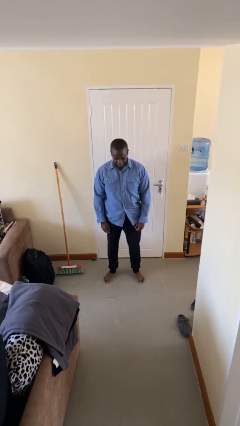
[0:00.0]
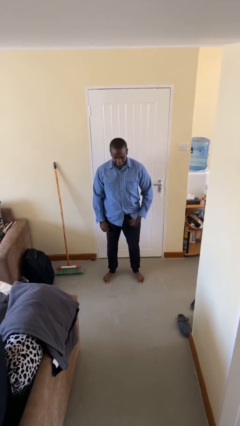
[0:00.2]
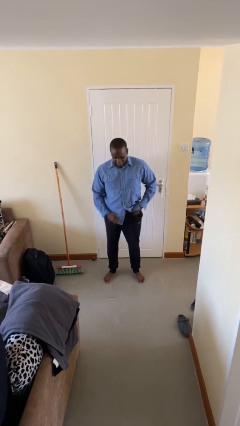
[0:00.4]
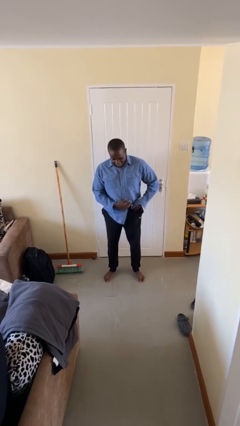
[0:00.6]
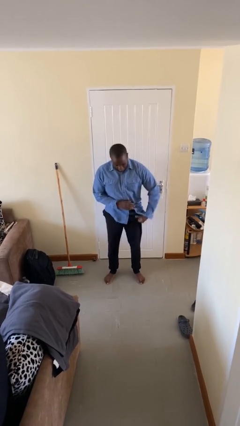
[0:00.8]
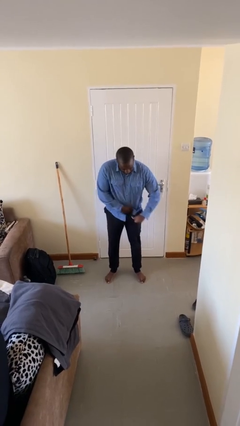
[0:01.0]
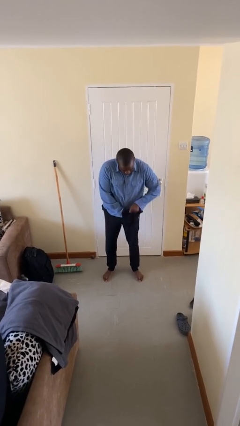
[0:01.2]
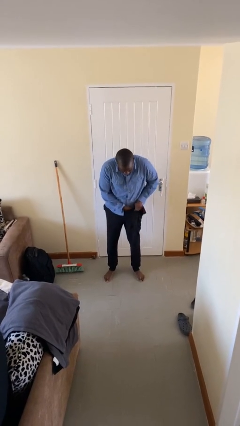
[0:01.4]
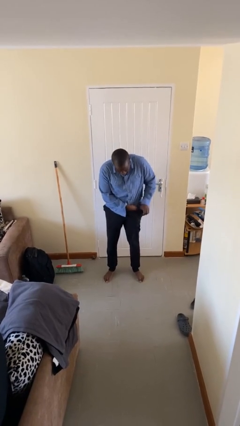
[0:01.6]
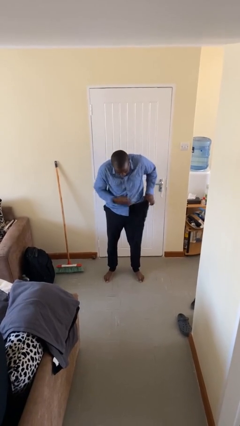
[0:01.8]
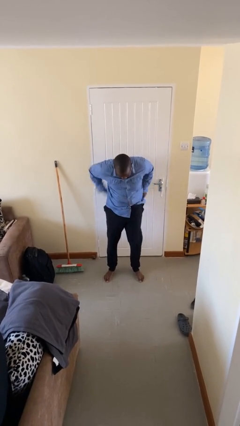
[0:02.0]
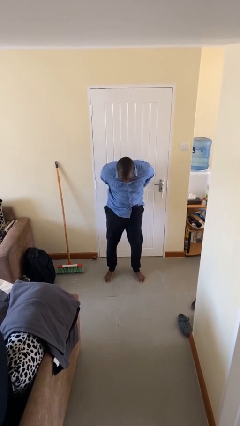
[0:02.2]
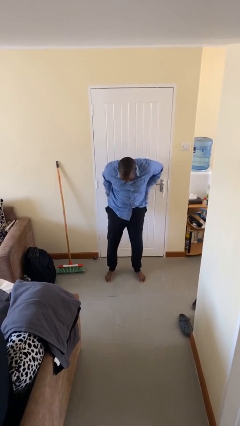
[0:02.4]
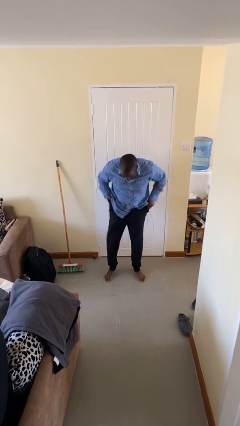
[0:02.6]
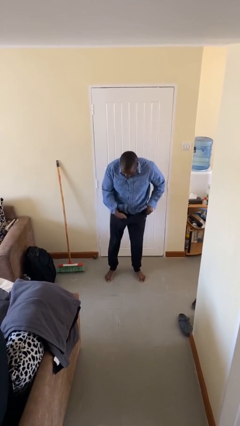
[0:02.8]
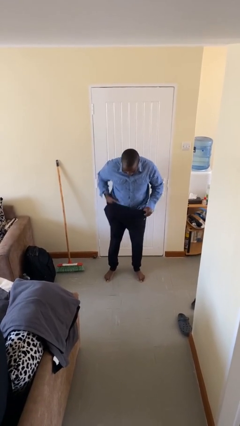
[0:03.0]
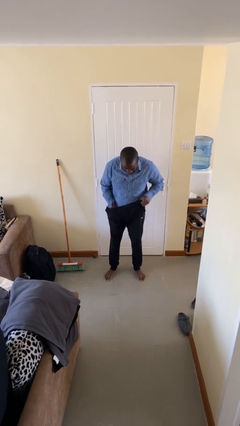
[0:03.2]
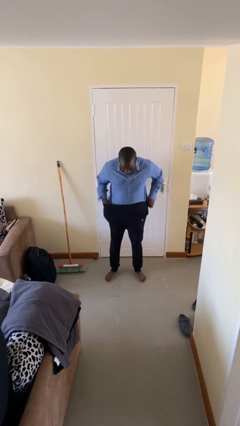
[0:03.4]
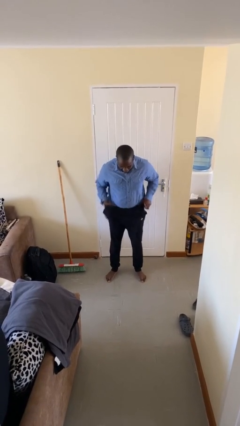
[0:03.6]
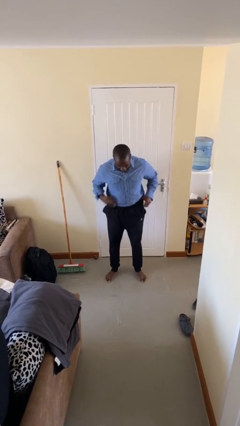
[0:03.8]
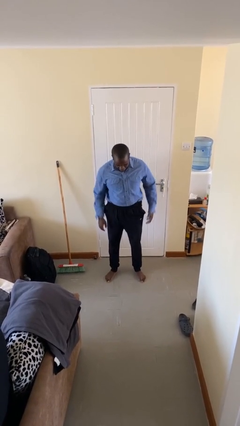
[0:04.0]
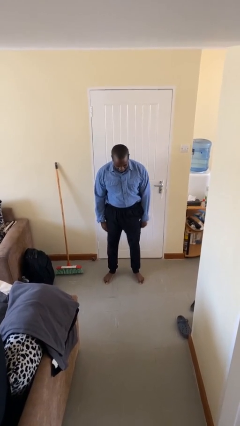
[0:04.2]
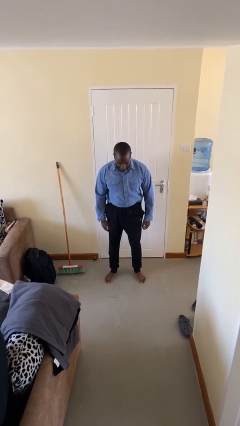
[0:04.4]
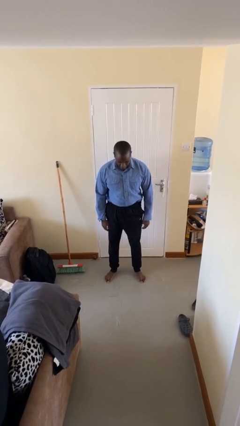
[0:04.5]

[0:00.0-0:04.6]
person tucks in shirt

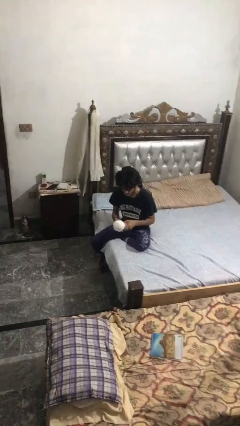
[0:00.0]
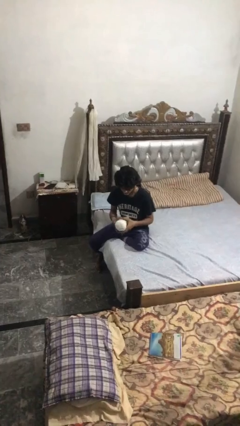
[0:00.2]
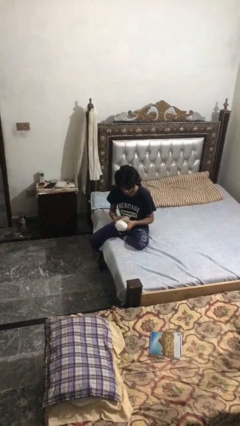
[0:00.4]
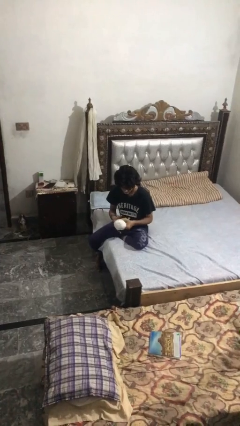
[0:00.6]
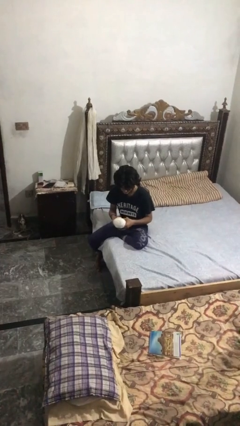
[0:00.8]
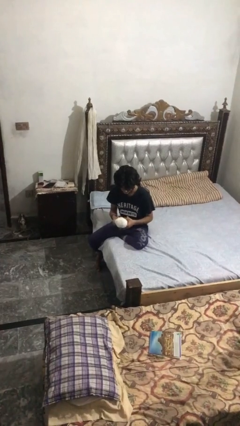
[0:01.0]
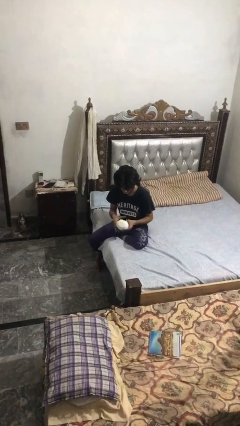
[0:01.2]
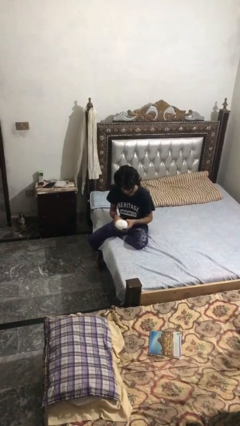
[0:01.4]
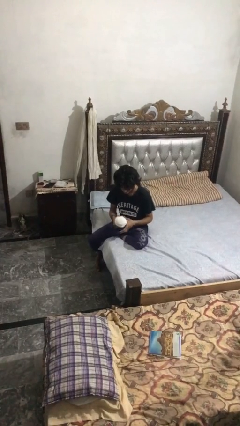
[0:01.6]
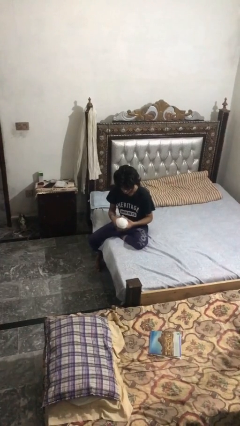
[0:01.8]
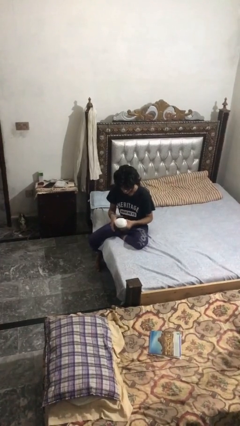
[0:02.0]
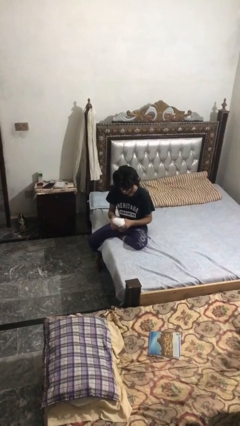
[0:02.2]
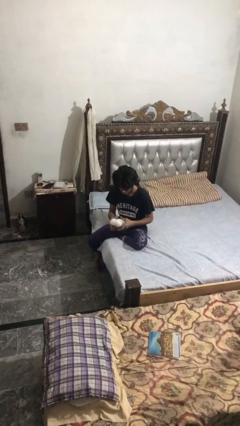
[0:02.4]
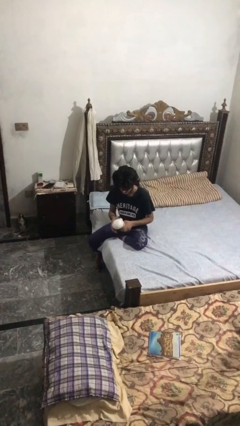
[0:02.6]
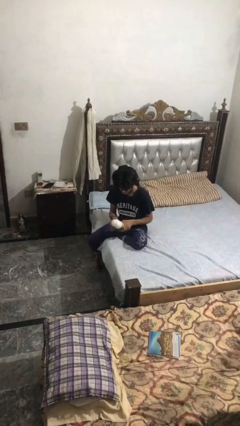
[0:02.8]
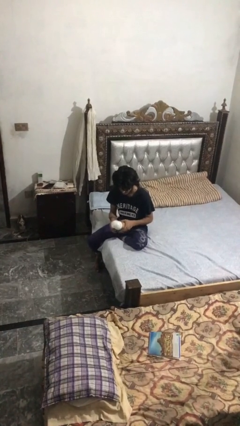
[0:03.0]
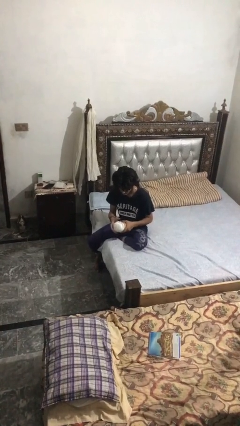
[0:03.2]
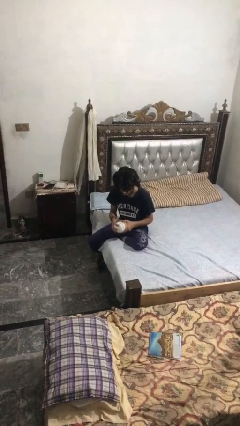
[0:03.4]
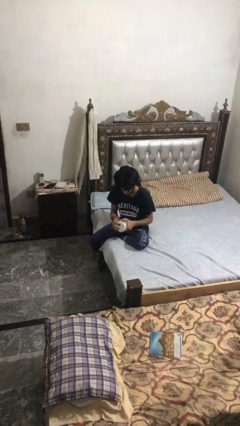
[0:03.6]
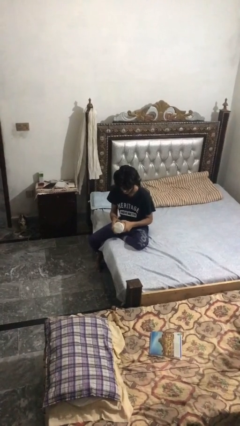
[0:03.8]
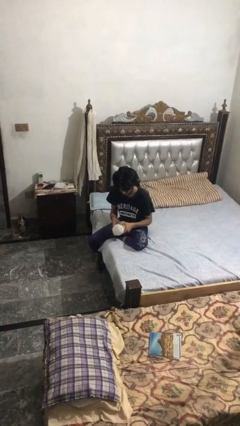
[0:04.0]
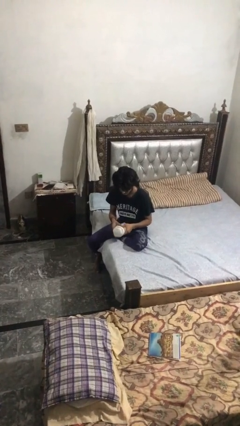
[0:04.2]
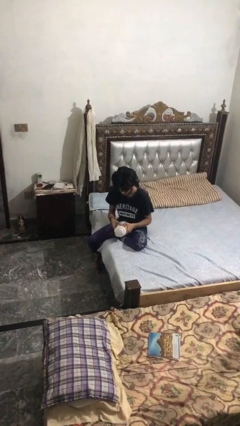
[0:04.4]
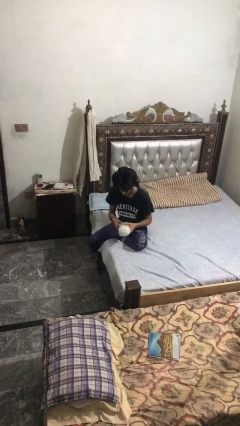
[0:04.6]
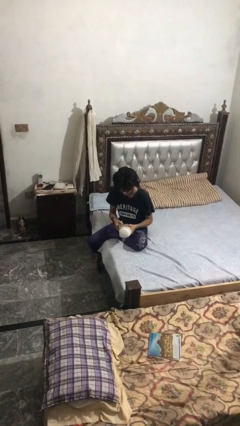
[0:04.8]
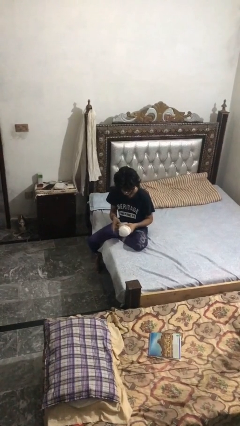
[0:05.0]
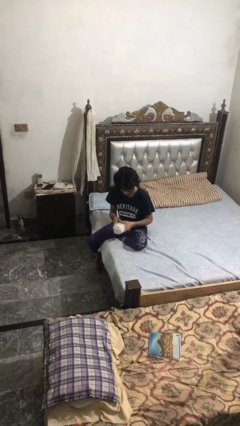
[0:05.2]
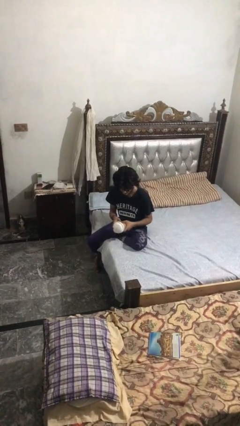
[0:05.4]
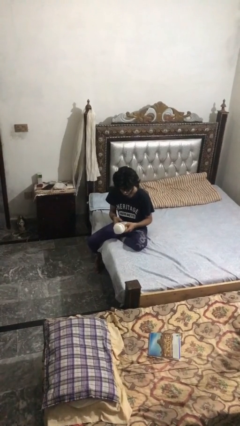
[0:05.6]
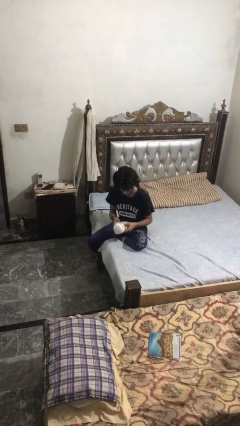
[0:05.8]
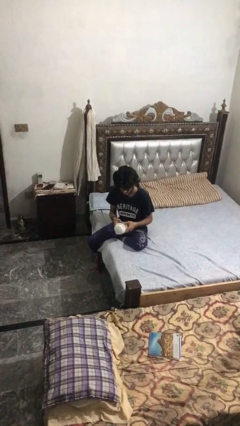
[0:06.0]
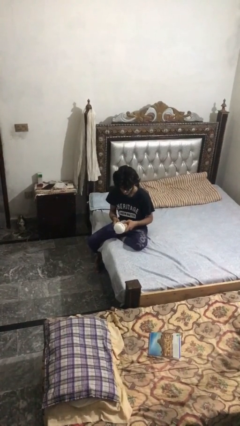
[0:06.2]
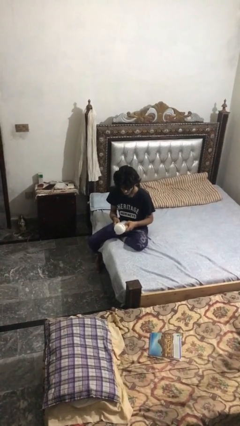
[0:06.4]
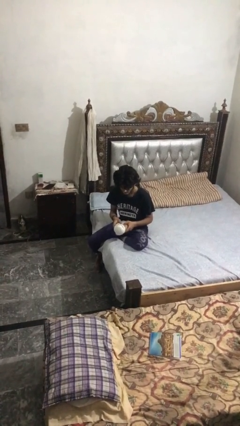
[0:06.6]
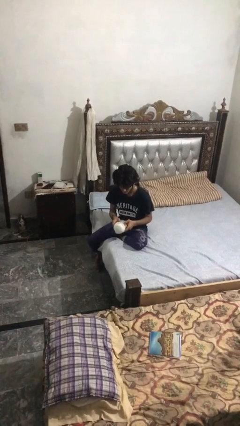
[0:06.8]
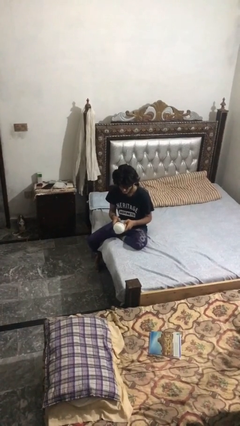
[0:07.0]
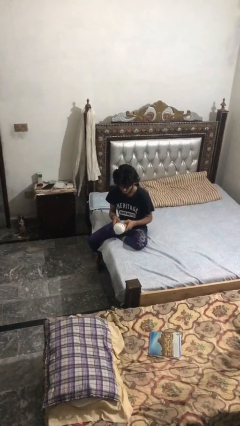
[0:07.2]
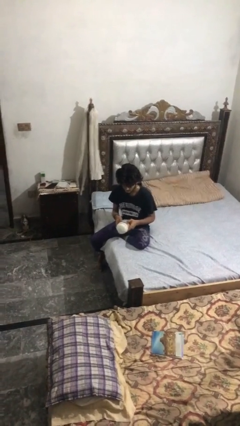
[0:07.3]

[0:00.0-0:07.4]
person squeezes object

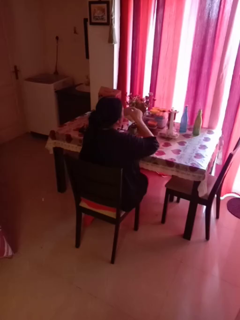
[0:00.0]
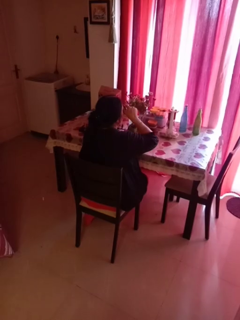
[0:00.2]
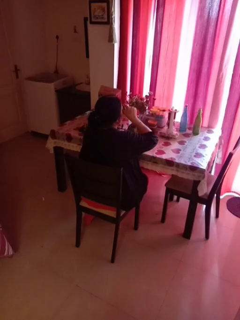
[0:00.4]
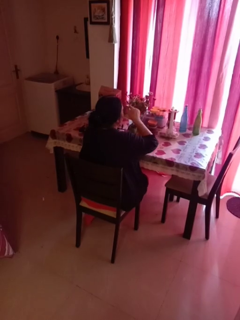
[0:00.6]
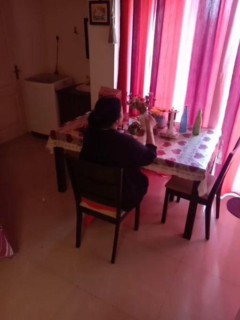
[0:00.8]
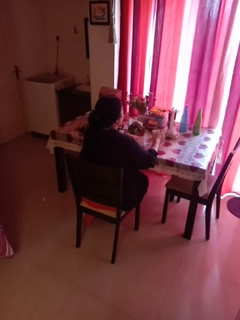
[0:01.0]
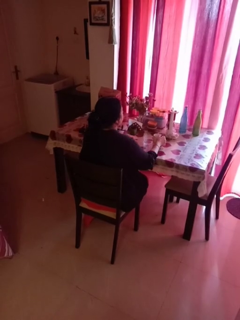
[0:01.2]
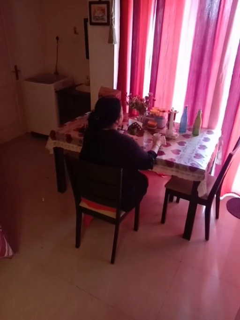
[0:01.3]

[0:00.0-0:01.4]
person drinks from mug

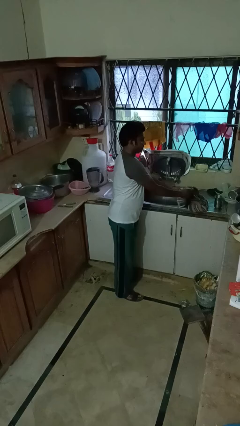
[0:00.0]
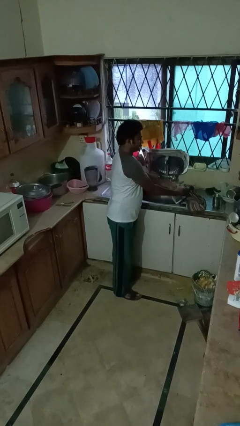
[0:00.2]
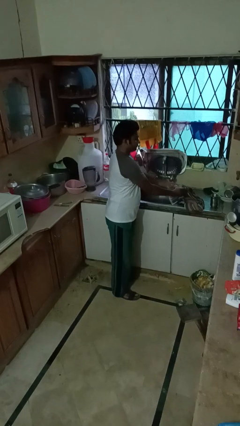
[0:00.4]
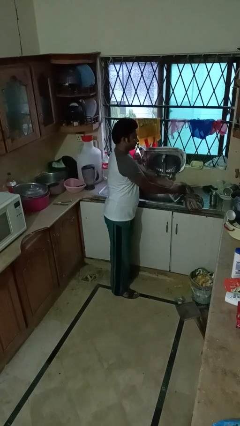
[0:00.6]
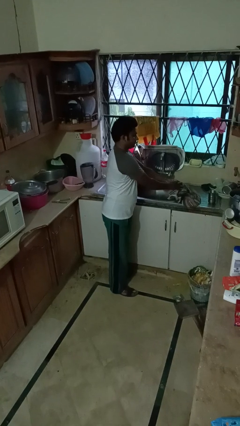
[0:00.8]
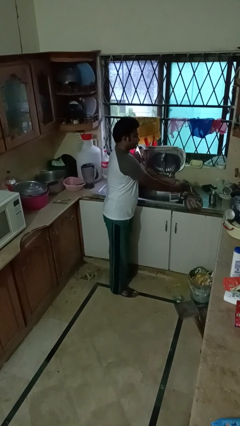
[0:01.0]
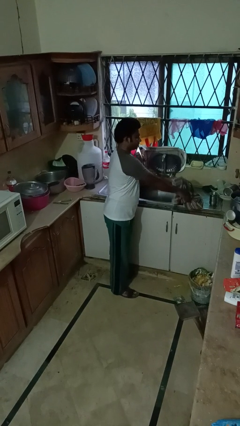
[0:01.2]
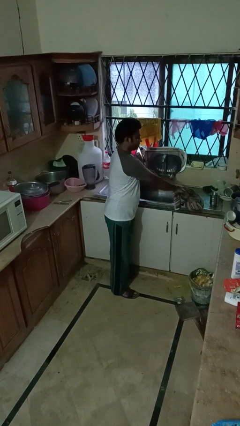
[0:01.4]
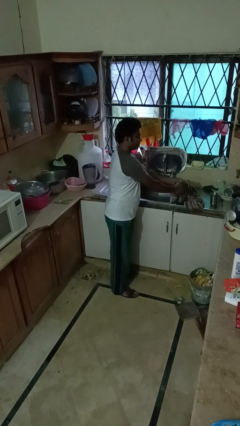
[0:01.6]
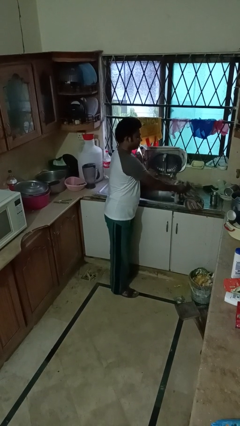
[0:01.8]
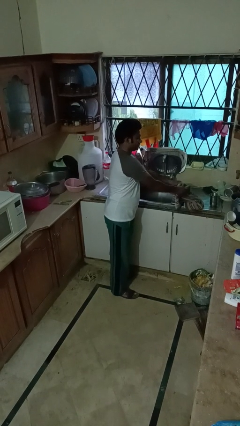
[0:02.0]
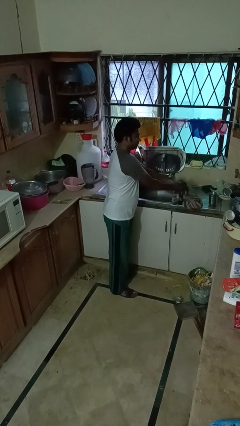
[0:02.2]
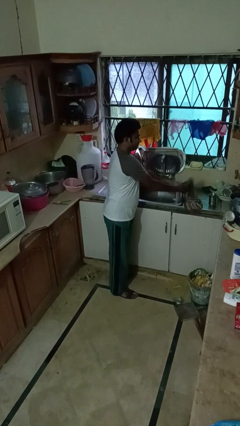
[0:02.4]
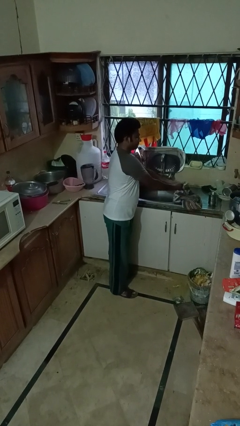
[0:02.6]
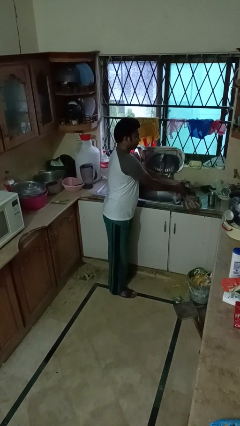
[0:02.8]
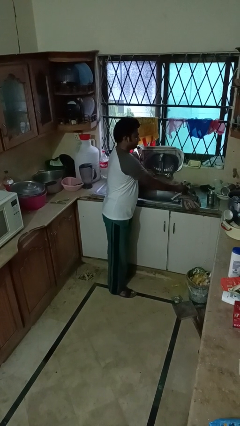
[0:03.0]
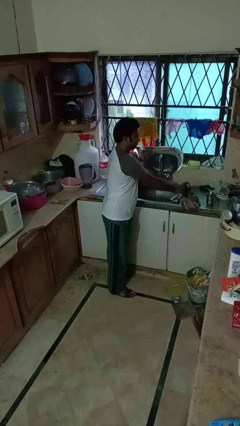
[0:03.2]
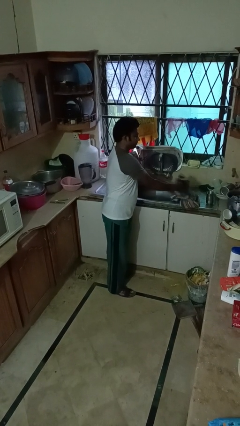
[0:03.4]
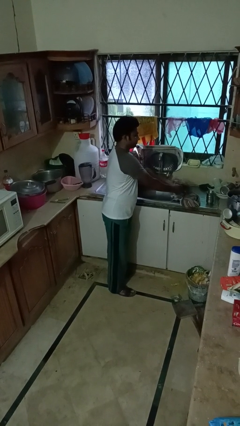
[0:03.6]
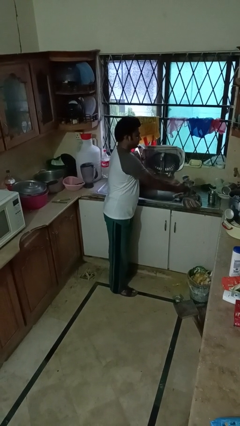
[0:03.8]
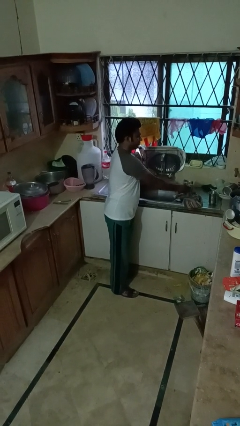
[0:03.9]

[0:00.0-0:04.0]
person dries hands with towel

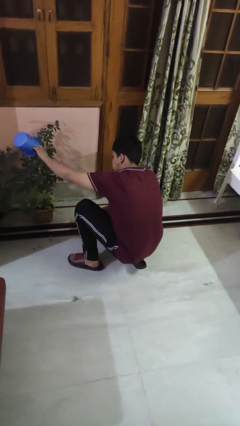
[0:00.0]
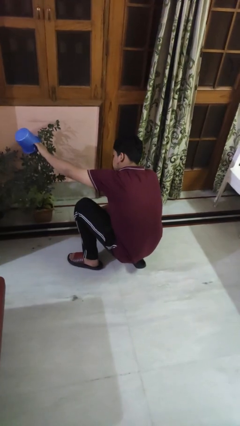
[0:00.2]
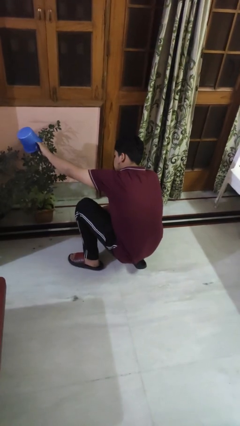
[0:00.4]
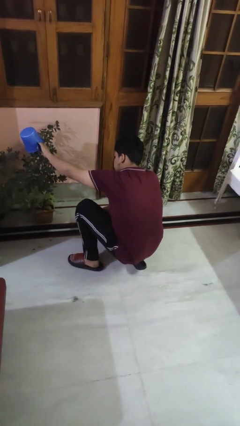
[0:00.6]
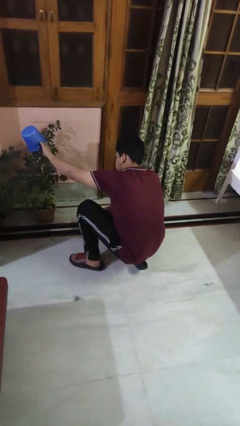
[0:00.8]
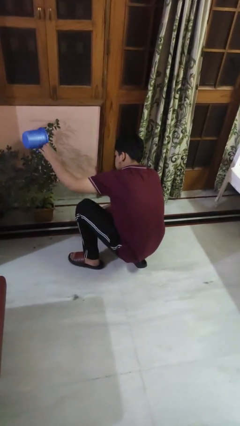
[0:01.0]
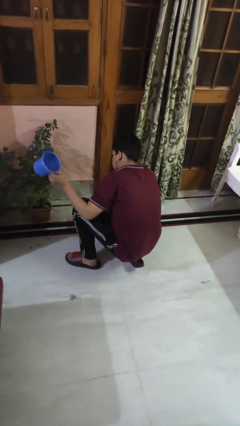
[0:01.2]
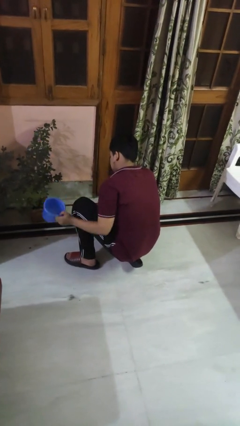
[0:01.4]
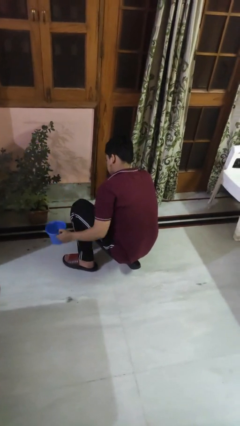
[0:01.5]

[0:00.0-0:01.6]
person waters houseplant
